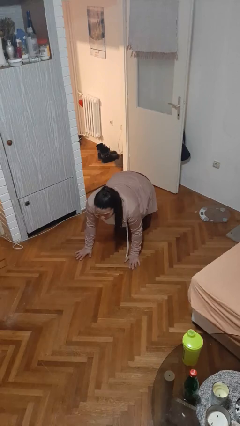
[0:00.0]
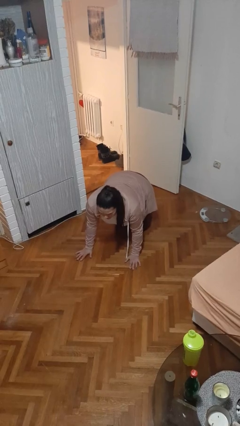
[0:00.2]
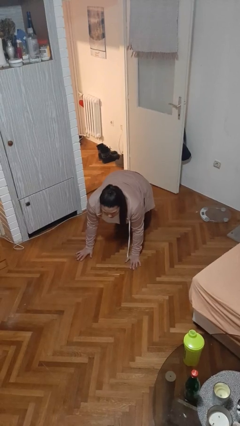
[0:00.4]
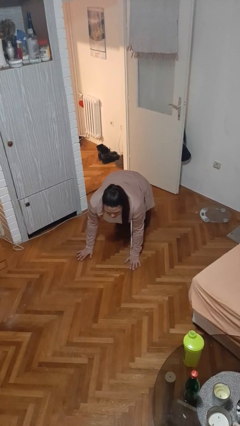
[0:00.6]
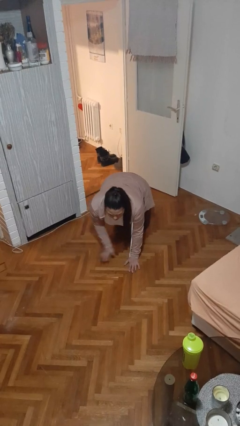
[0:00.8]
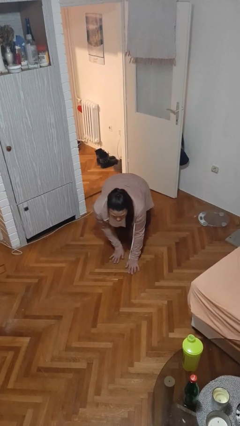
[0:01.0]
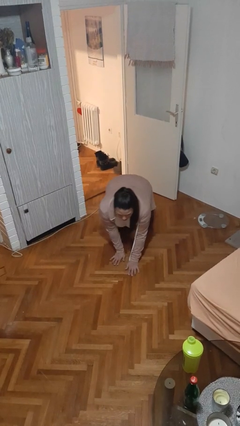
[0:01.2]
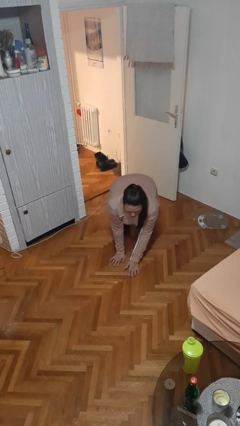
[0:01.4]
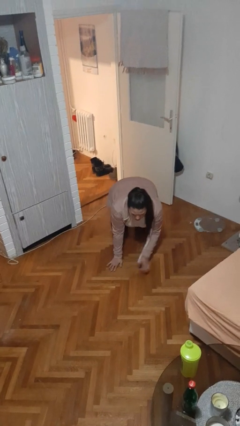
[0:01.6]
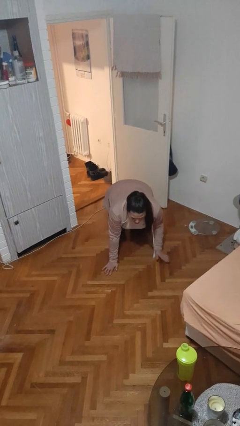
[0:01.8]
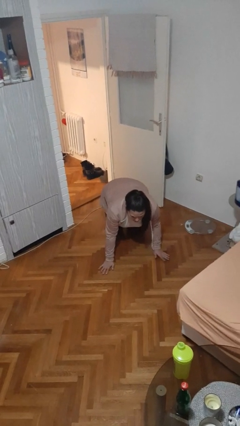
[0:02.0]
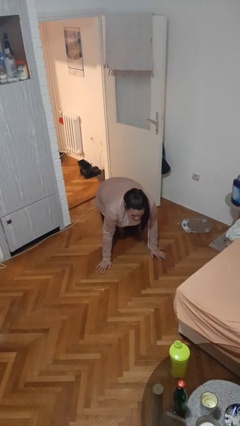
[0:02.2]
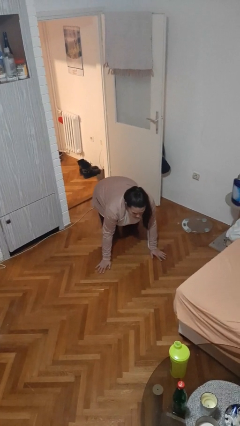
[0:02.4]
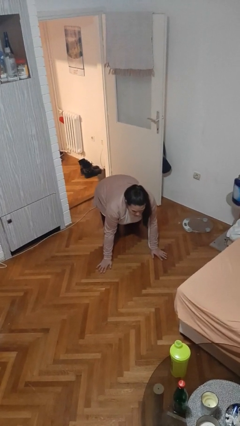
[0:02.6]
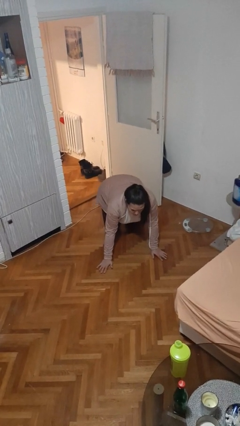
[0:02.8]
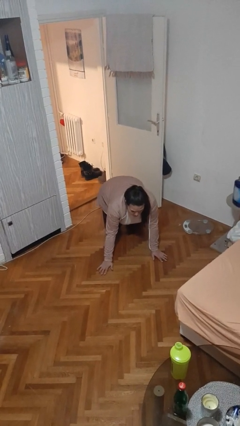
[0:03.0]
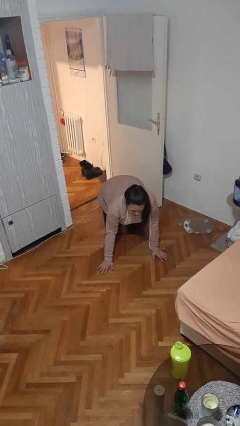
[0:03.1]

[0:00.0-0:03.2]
person crawls

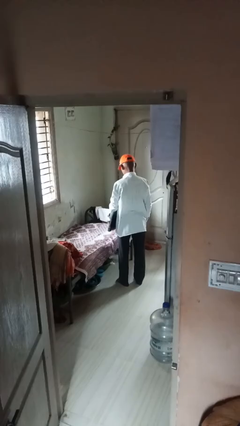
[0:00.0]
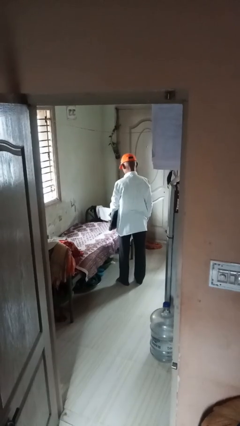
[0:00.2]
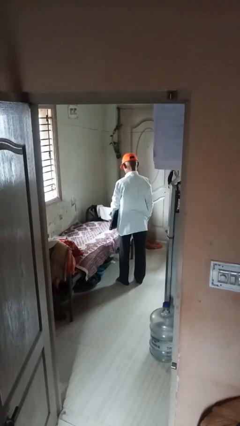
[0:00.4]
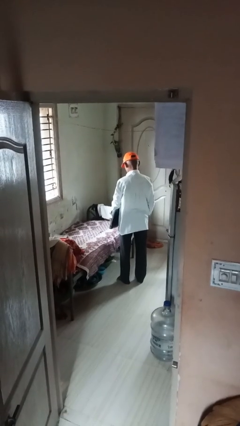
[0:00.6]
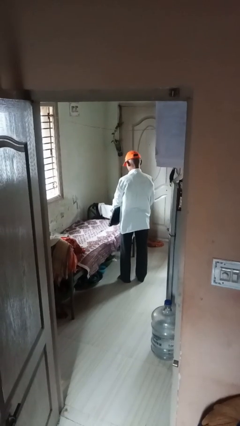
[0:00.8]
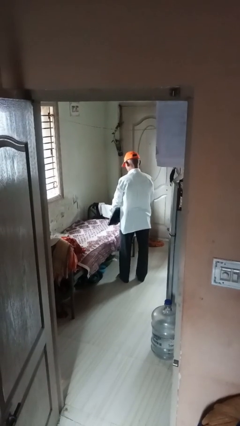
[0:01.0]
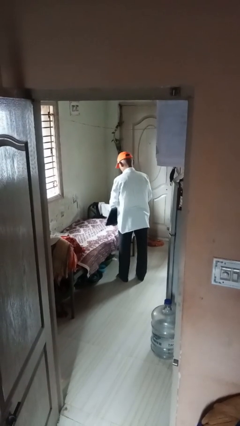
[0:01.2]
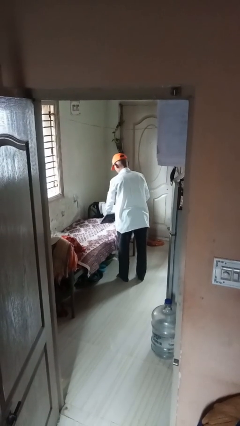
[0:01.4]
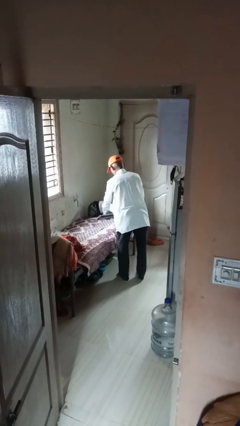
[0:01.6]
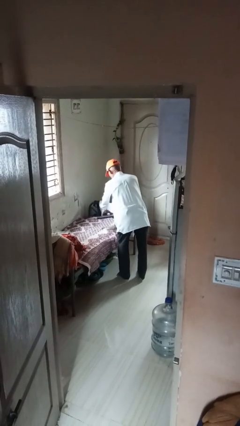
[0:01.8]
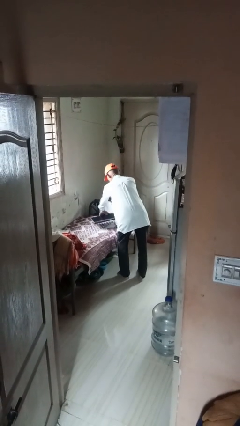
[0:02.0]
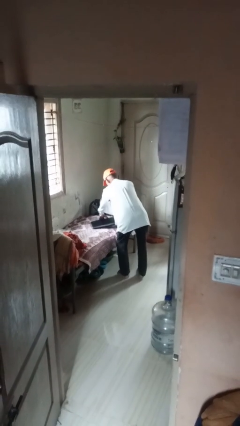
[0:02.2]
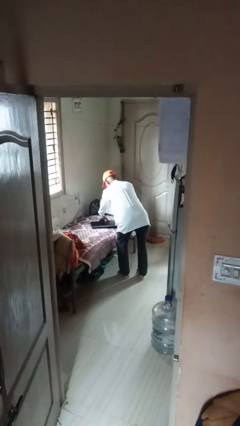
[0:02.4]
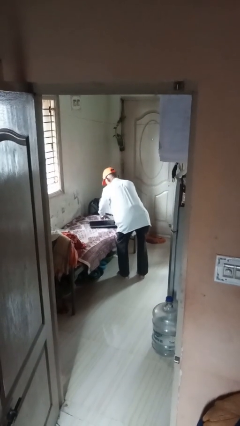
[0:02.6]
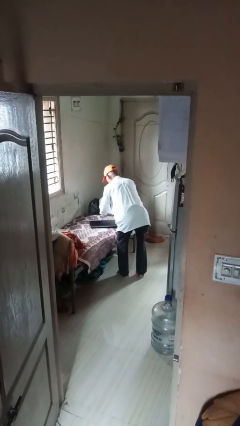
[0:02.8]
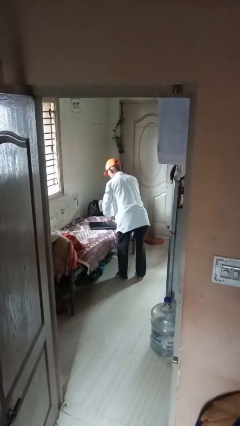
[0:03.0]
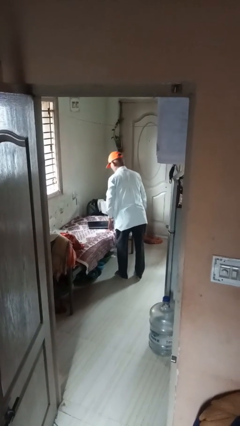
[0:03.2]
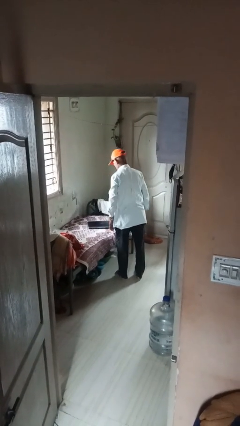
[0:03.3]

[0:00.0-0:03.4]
person puts down object on bed

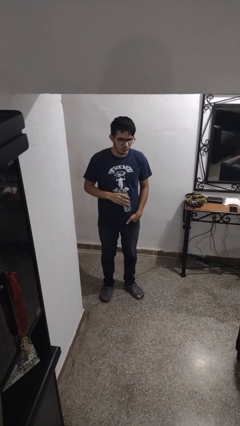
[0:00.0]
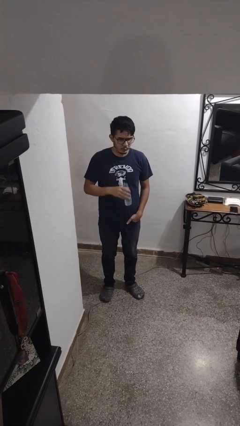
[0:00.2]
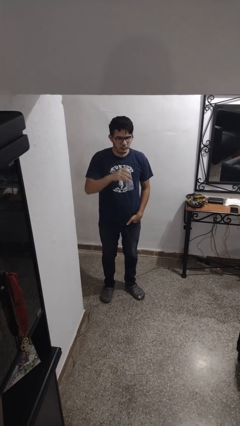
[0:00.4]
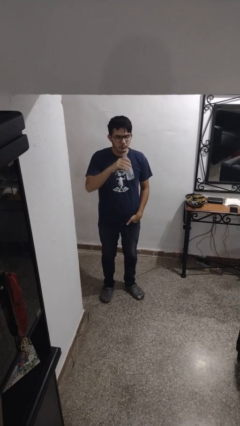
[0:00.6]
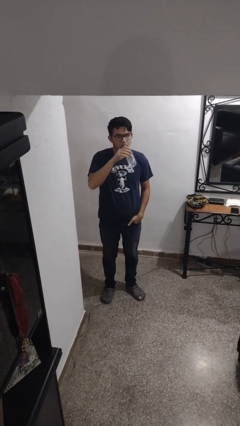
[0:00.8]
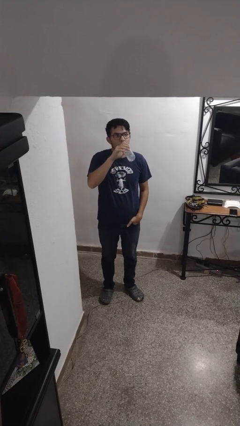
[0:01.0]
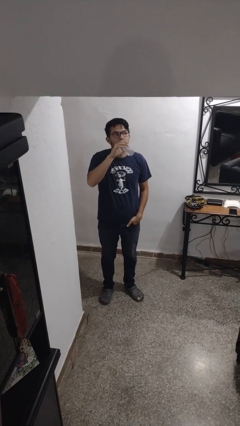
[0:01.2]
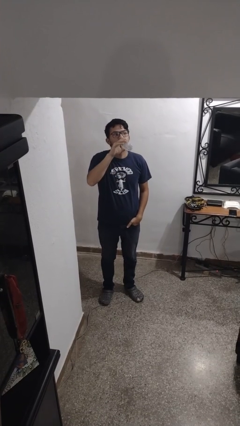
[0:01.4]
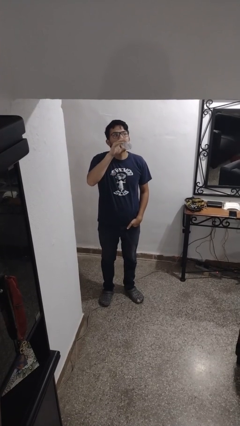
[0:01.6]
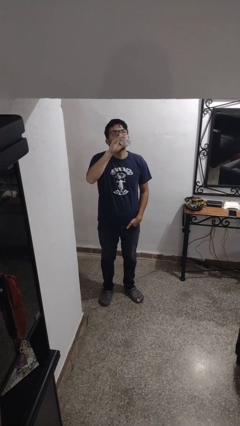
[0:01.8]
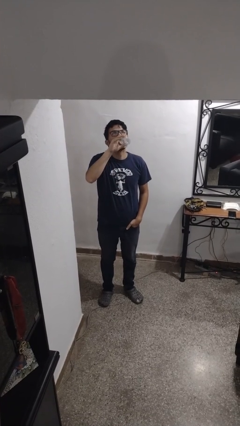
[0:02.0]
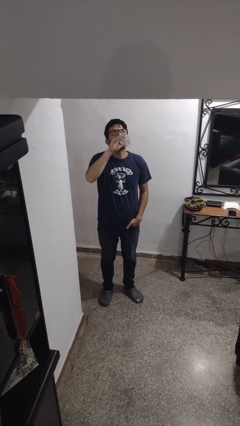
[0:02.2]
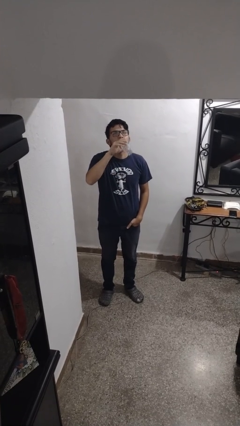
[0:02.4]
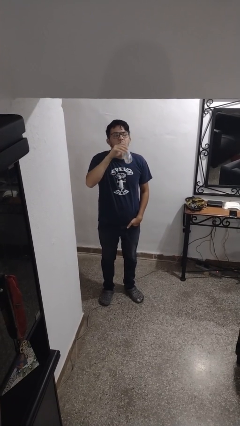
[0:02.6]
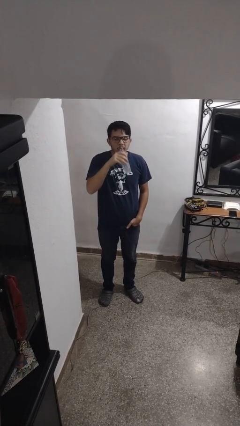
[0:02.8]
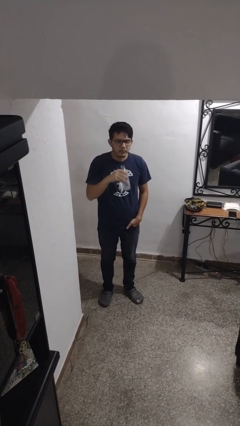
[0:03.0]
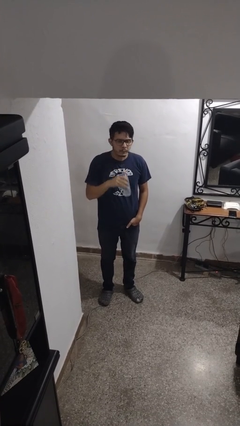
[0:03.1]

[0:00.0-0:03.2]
person drinks from bottle

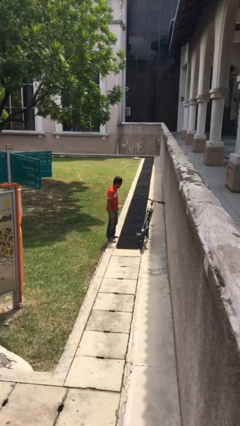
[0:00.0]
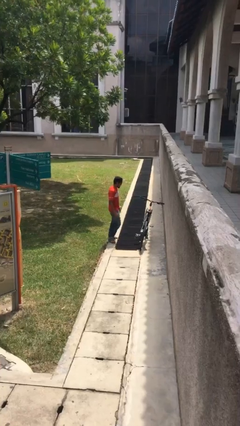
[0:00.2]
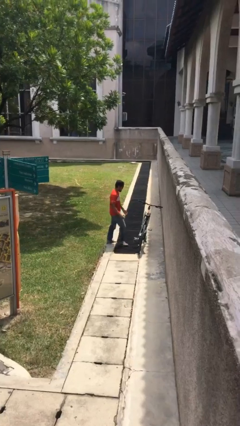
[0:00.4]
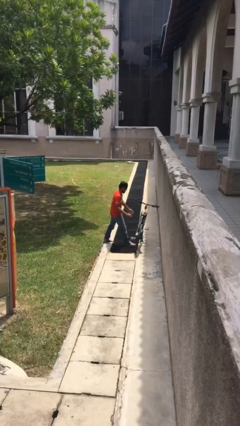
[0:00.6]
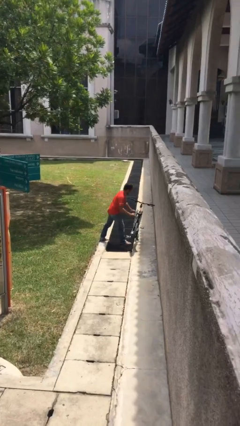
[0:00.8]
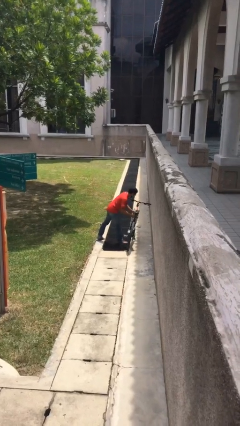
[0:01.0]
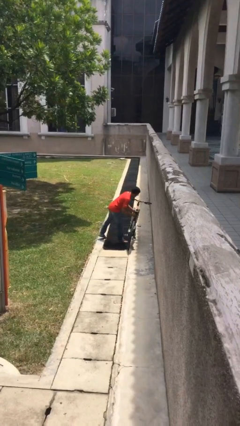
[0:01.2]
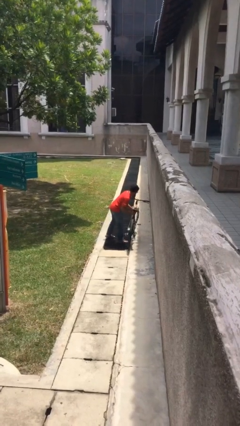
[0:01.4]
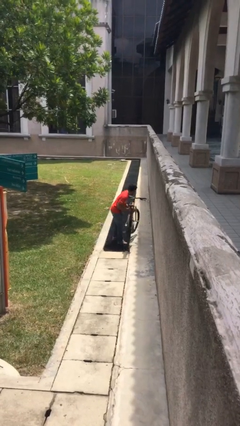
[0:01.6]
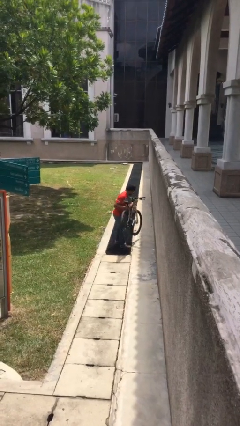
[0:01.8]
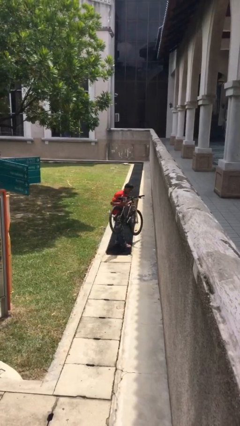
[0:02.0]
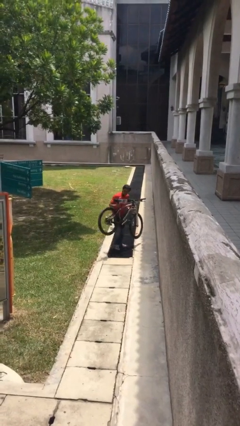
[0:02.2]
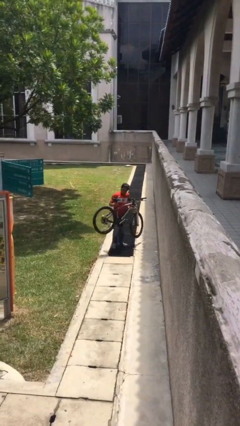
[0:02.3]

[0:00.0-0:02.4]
person picks up object from floor

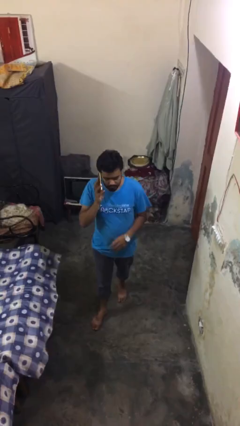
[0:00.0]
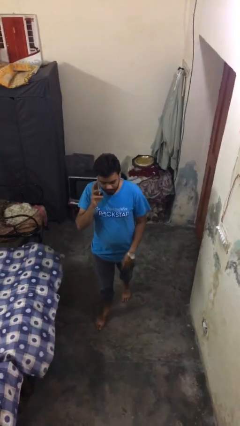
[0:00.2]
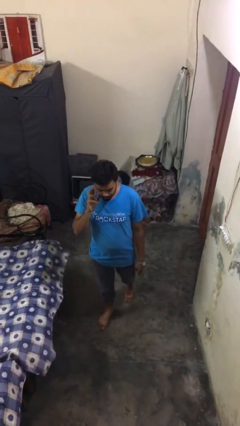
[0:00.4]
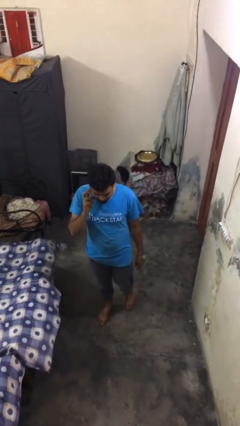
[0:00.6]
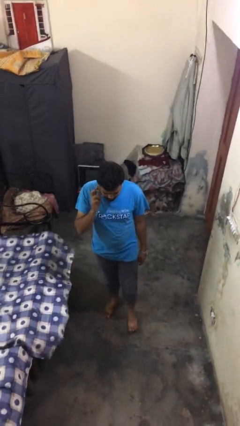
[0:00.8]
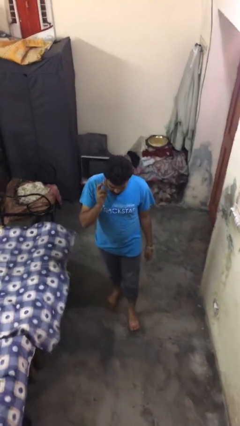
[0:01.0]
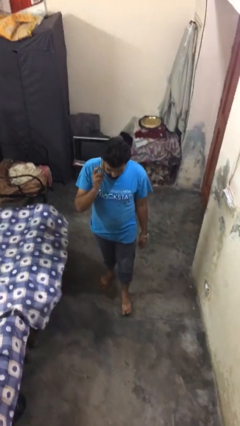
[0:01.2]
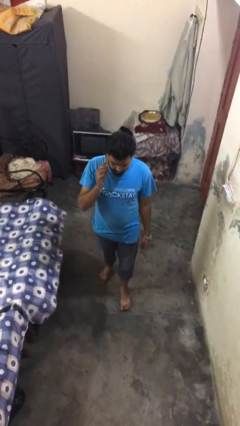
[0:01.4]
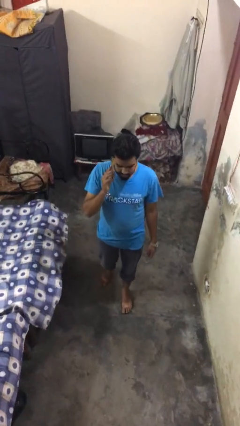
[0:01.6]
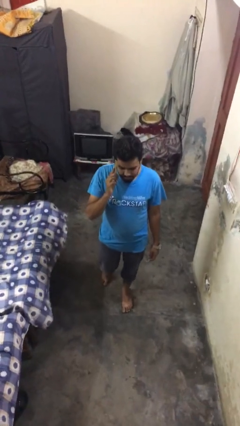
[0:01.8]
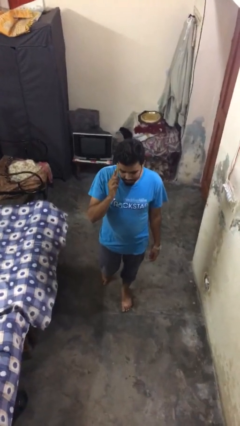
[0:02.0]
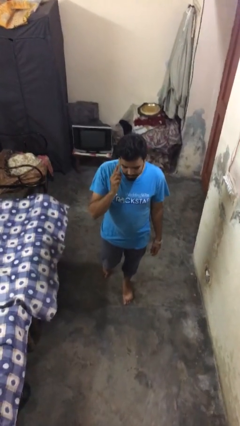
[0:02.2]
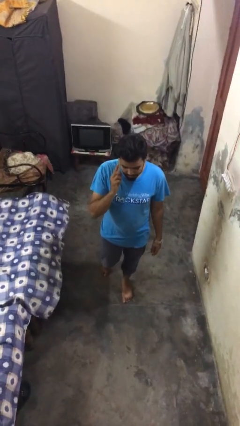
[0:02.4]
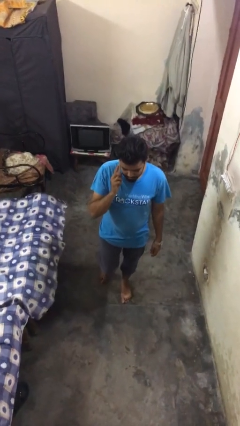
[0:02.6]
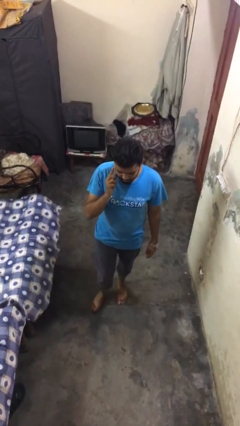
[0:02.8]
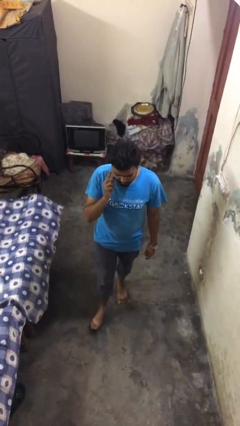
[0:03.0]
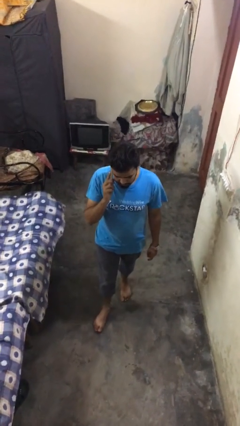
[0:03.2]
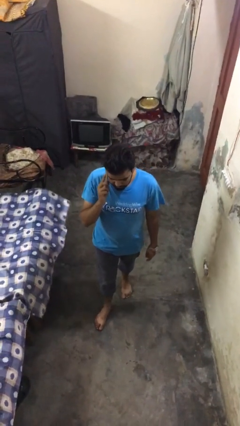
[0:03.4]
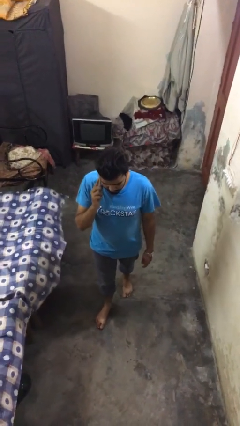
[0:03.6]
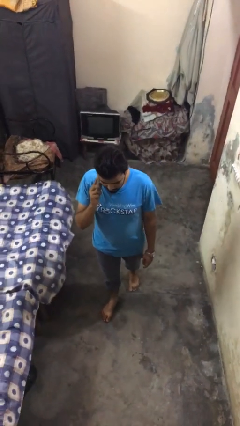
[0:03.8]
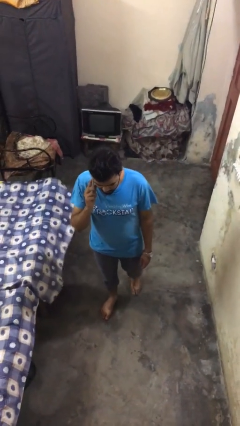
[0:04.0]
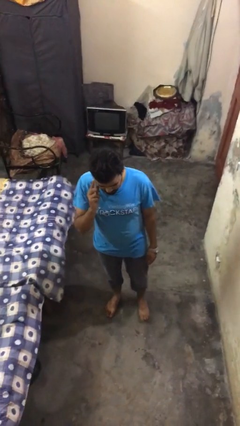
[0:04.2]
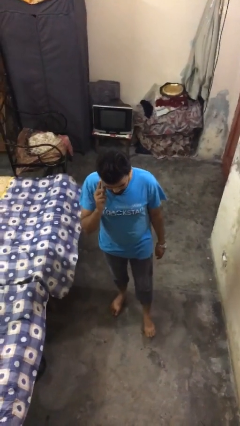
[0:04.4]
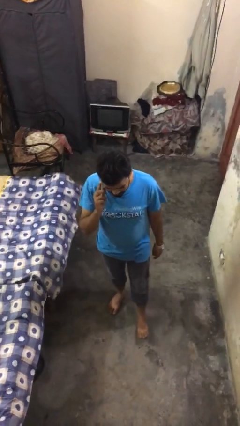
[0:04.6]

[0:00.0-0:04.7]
person talks on phone

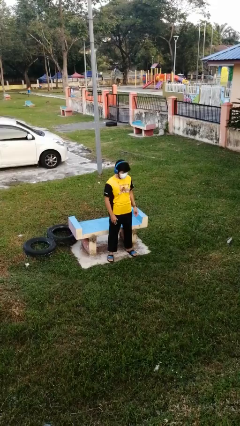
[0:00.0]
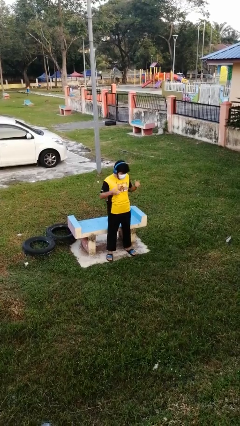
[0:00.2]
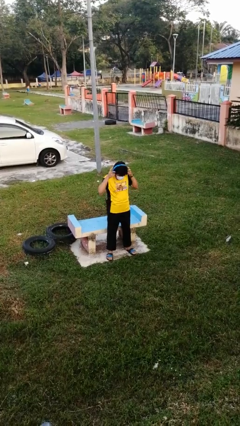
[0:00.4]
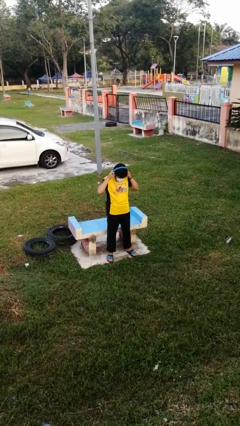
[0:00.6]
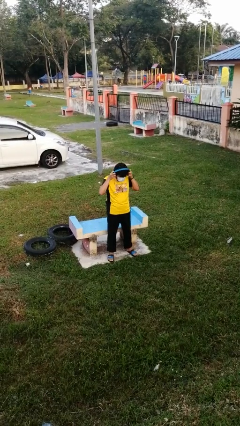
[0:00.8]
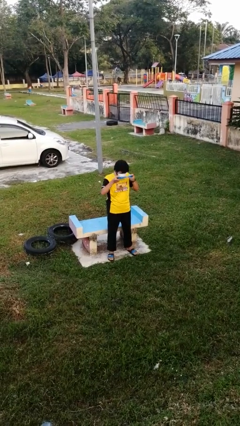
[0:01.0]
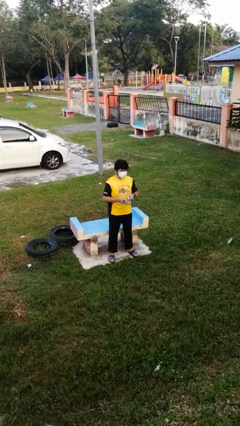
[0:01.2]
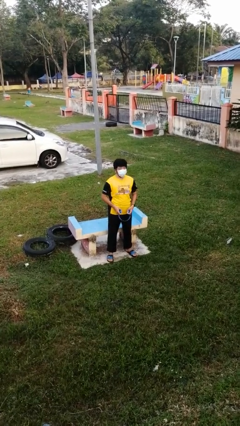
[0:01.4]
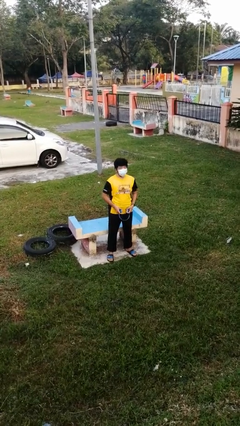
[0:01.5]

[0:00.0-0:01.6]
person takes off headphones
